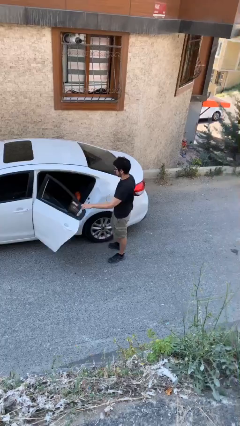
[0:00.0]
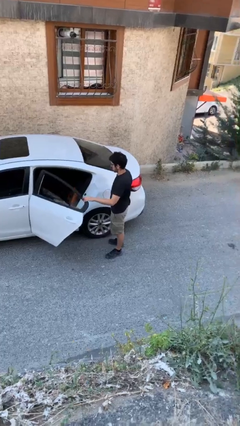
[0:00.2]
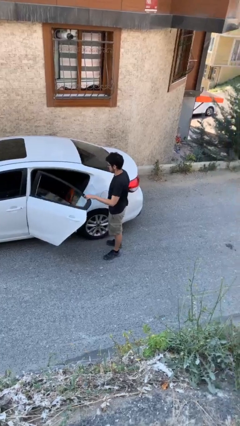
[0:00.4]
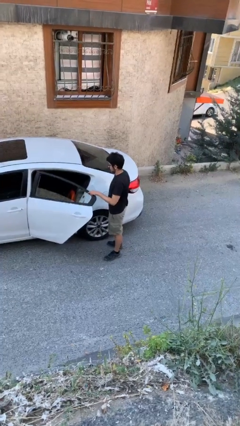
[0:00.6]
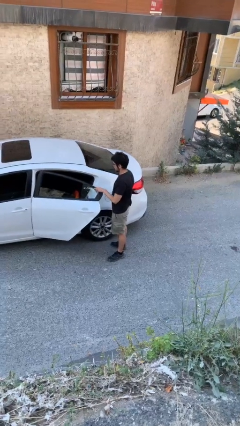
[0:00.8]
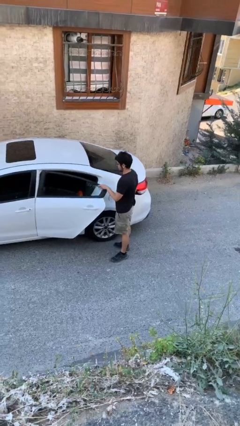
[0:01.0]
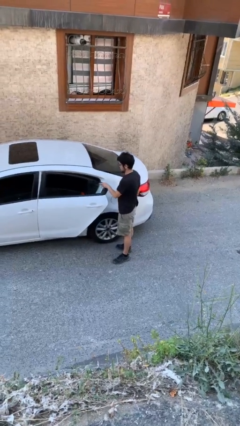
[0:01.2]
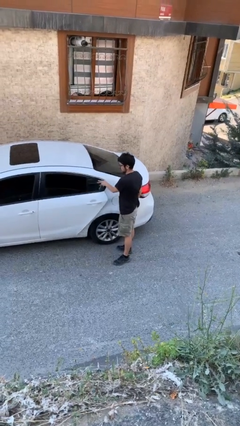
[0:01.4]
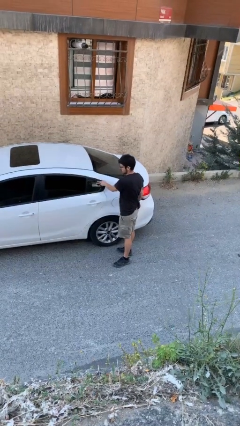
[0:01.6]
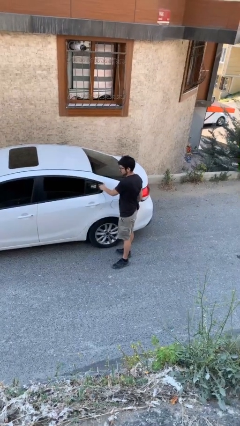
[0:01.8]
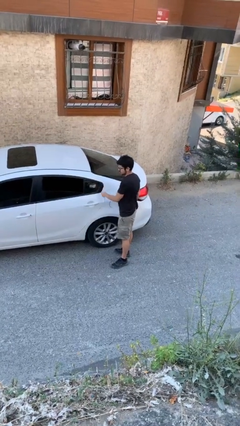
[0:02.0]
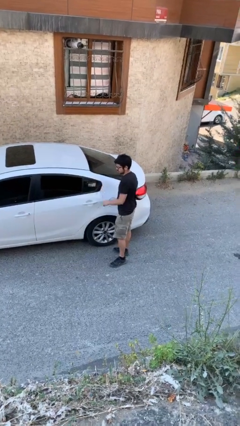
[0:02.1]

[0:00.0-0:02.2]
person closes car door

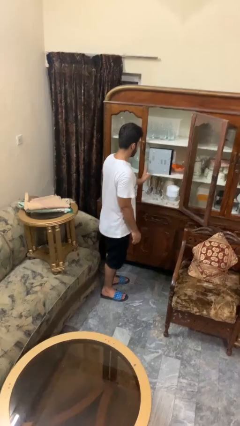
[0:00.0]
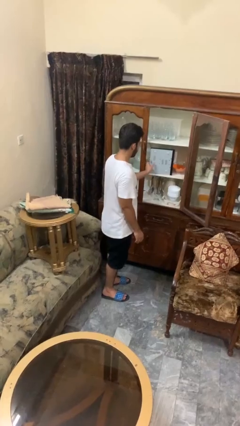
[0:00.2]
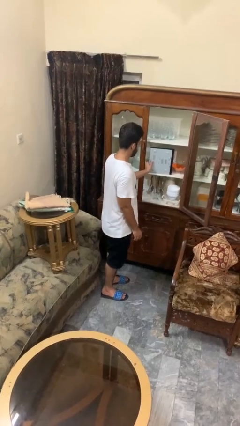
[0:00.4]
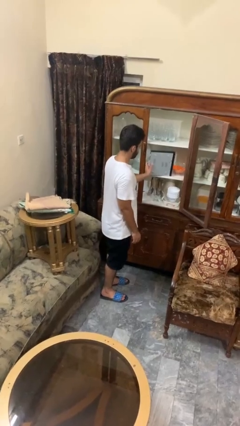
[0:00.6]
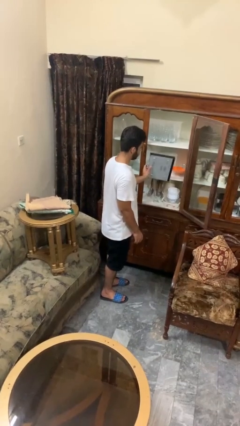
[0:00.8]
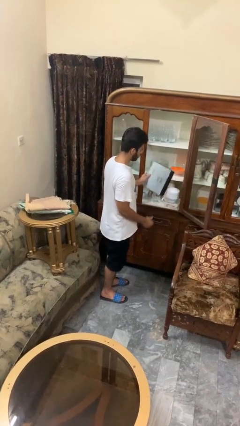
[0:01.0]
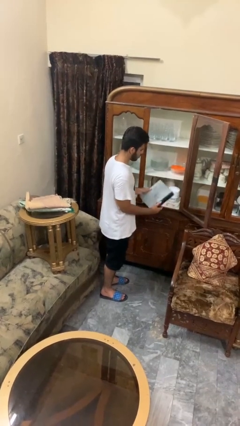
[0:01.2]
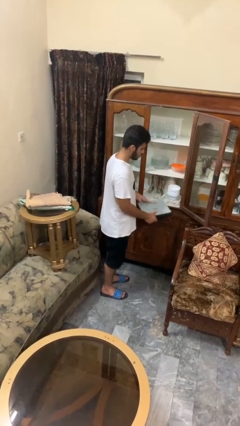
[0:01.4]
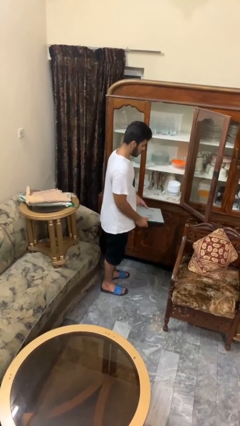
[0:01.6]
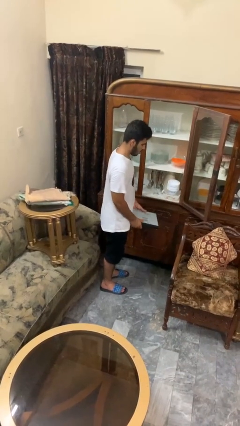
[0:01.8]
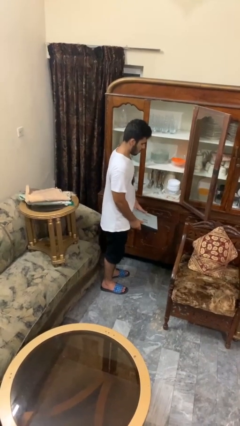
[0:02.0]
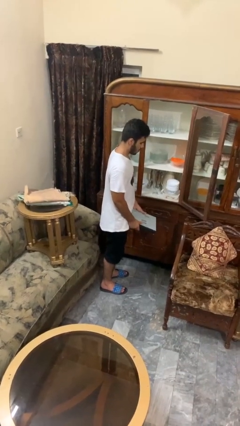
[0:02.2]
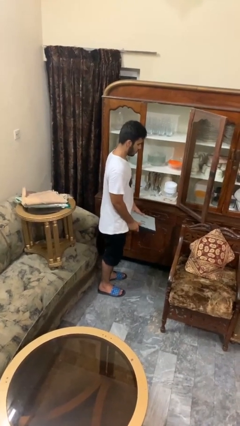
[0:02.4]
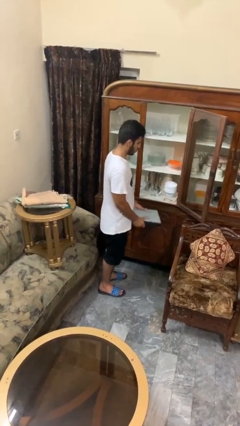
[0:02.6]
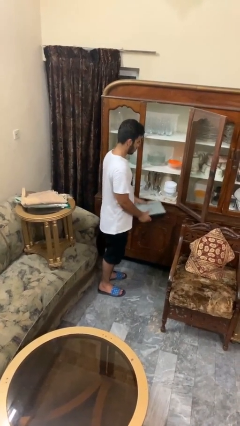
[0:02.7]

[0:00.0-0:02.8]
person picks up object from cabinet

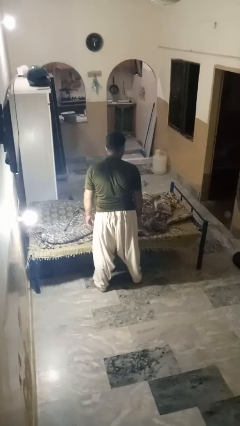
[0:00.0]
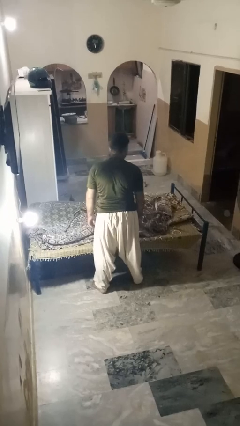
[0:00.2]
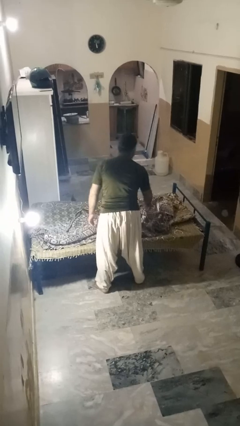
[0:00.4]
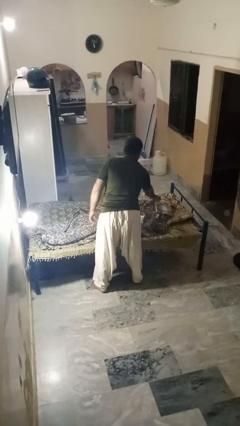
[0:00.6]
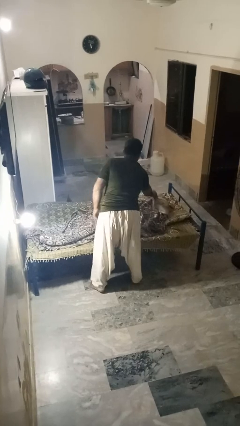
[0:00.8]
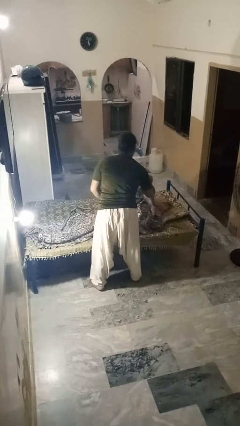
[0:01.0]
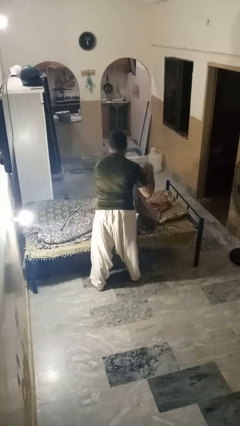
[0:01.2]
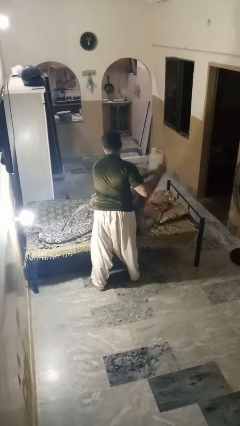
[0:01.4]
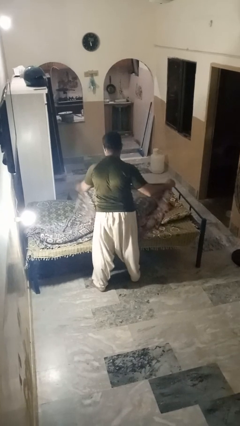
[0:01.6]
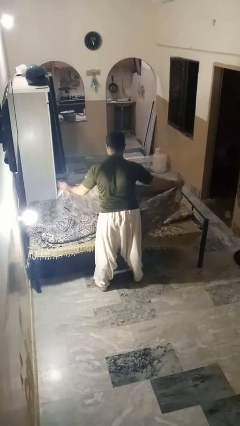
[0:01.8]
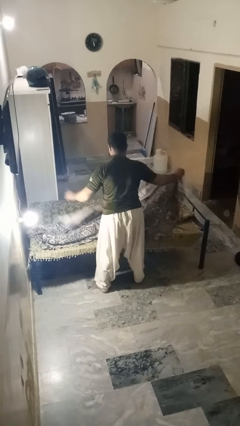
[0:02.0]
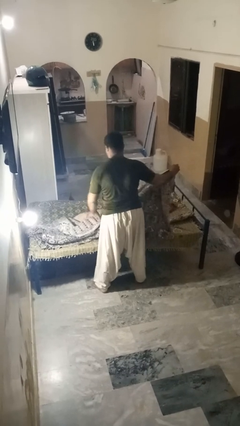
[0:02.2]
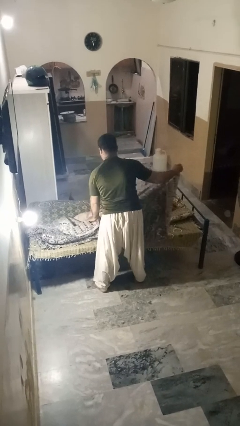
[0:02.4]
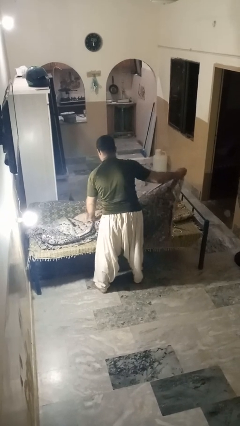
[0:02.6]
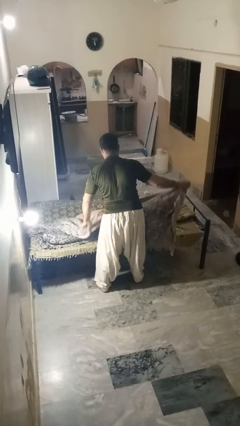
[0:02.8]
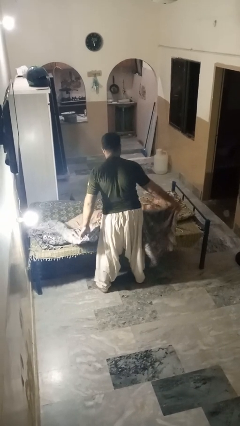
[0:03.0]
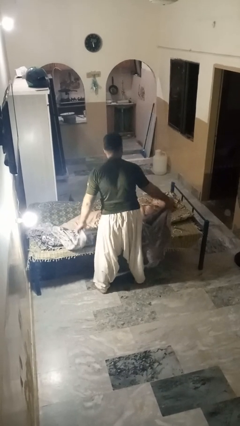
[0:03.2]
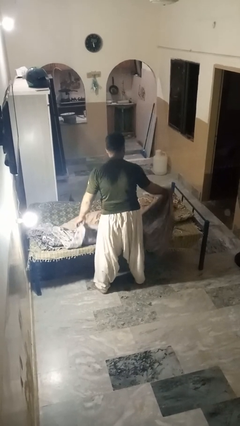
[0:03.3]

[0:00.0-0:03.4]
person uncovers friend with blanket

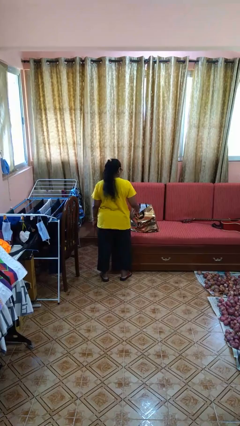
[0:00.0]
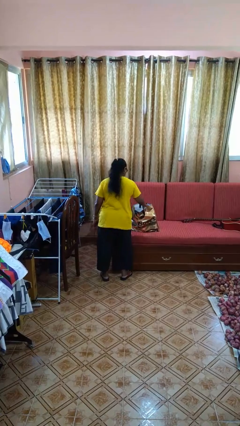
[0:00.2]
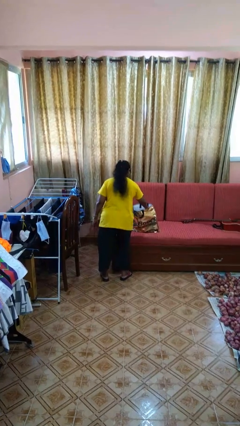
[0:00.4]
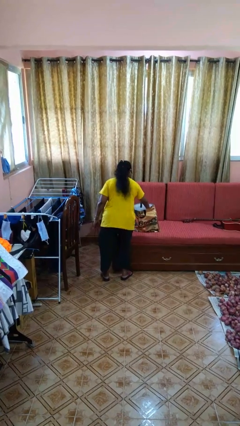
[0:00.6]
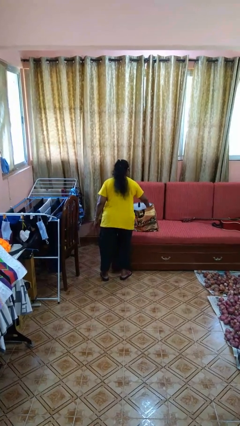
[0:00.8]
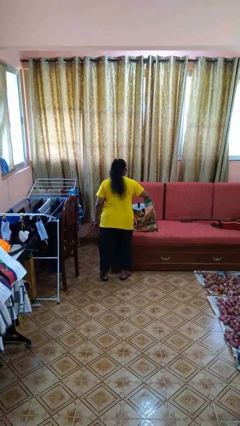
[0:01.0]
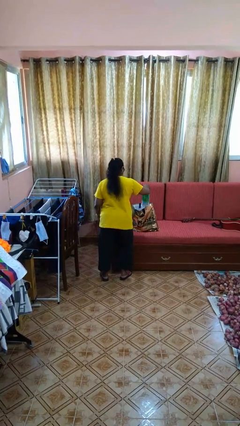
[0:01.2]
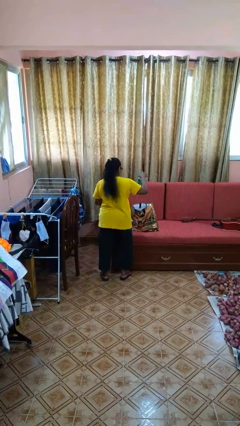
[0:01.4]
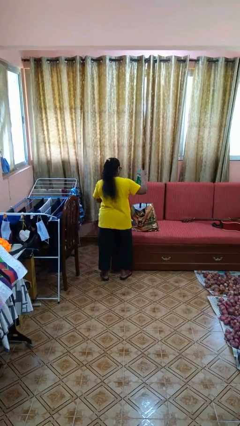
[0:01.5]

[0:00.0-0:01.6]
person takes object from bag

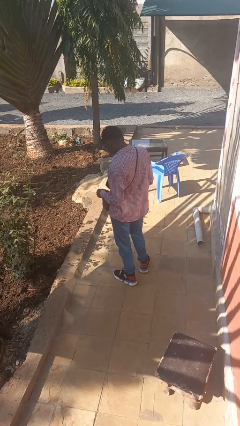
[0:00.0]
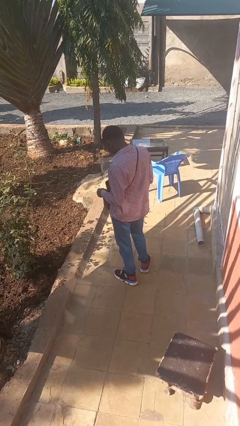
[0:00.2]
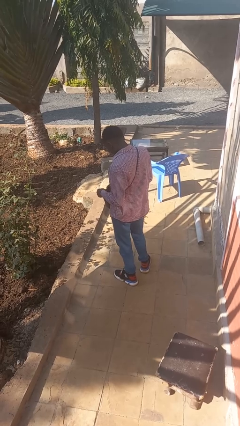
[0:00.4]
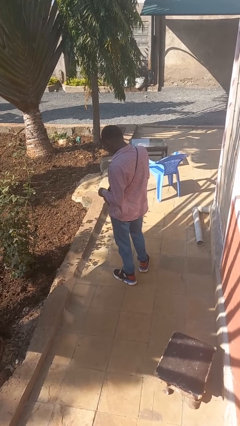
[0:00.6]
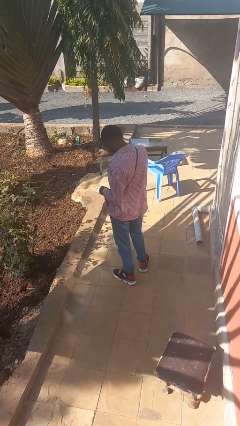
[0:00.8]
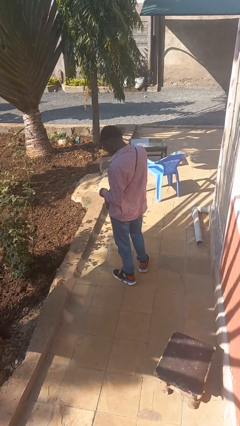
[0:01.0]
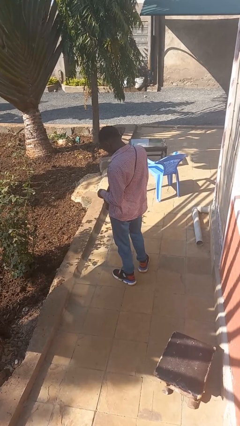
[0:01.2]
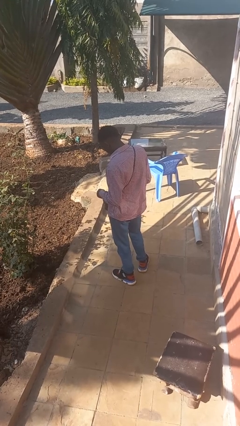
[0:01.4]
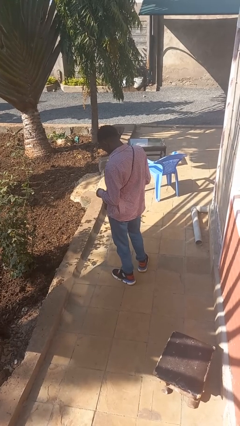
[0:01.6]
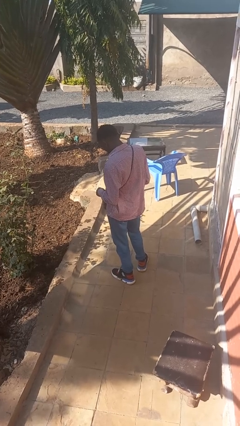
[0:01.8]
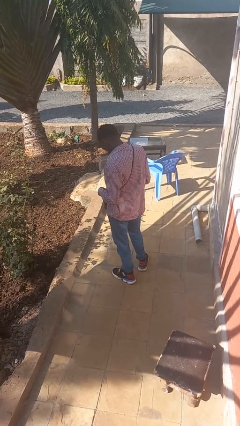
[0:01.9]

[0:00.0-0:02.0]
person puts object into purse

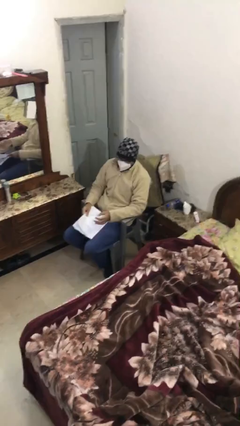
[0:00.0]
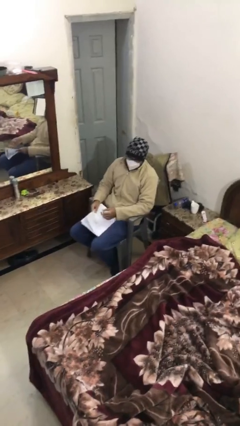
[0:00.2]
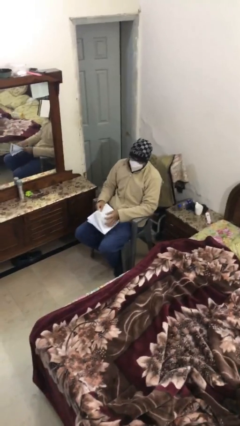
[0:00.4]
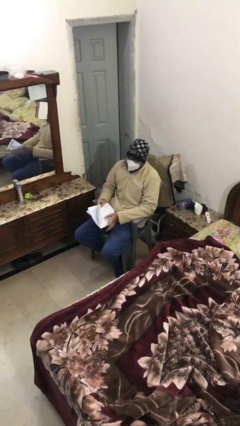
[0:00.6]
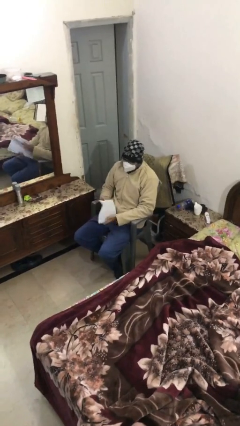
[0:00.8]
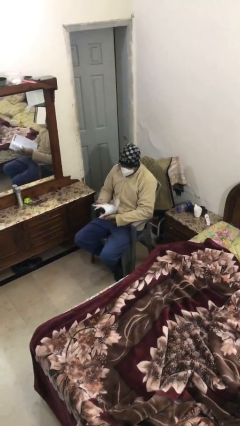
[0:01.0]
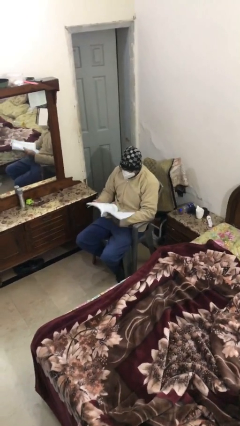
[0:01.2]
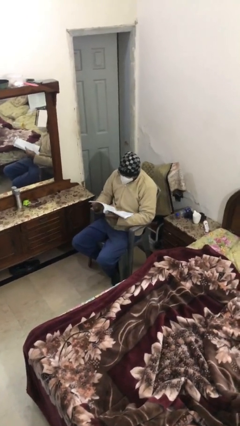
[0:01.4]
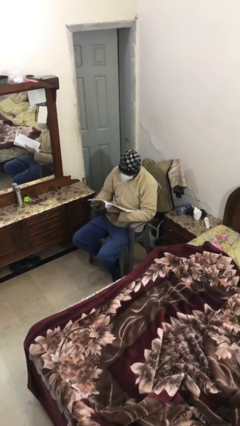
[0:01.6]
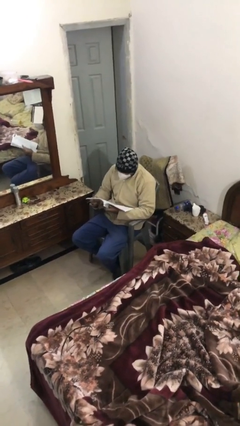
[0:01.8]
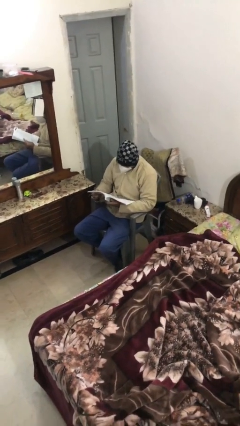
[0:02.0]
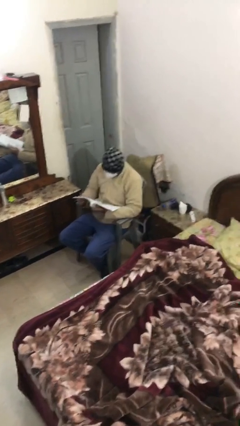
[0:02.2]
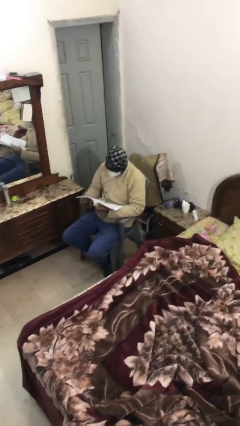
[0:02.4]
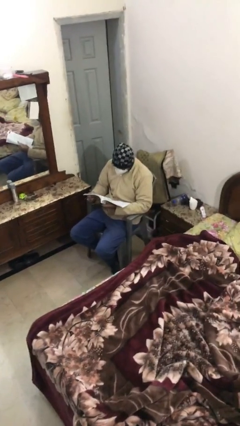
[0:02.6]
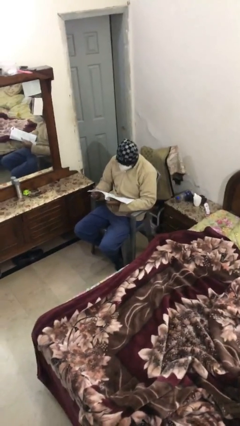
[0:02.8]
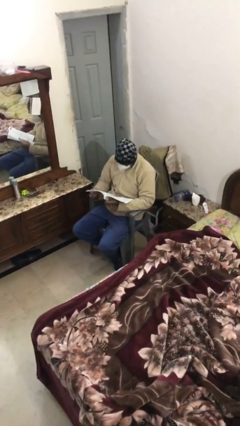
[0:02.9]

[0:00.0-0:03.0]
person reads document

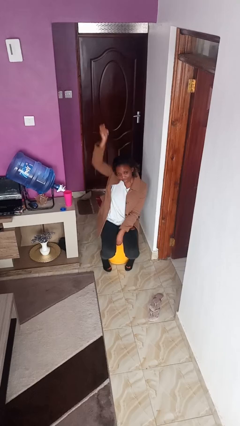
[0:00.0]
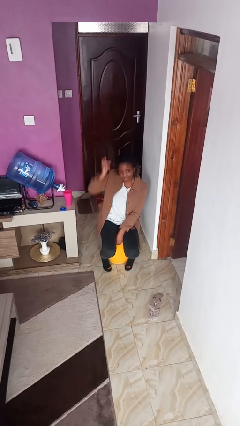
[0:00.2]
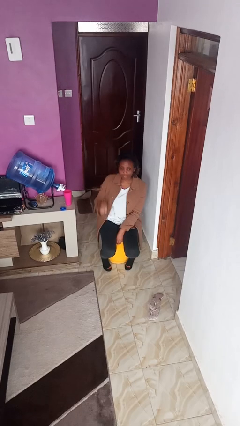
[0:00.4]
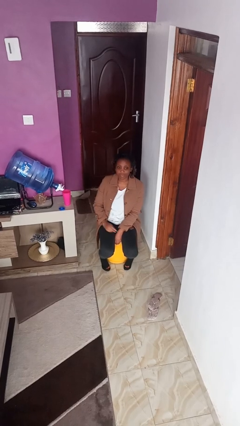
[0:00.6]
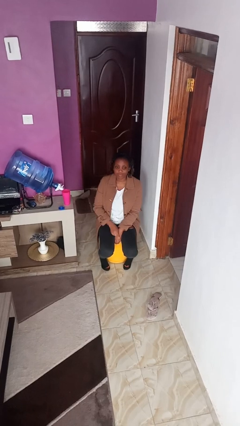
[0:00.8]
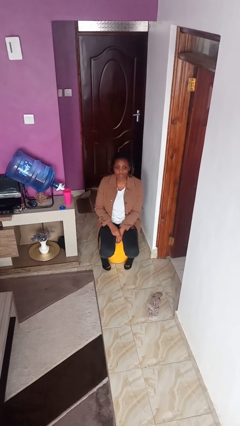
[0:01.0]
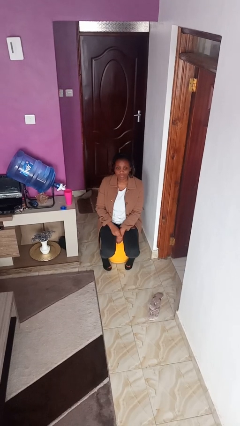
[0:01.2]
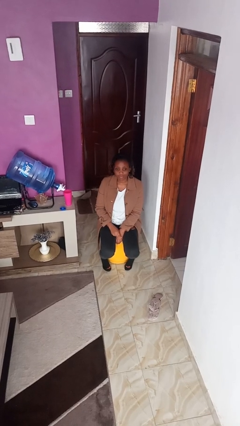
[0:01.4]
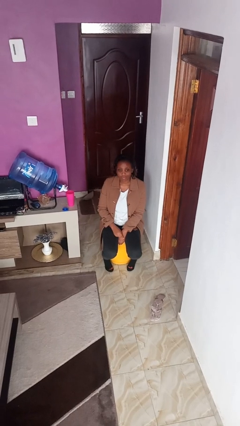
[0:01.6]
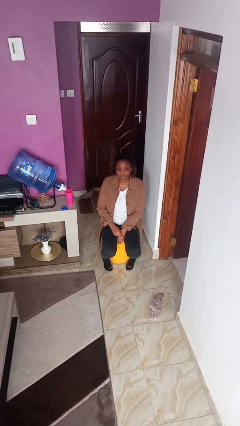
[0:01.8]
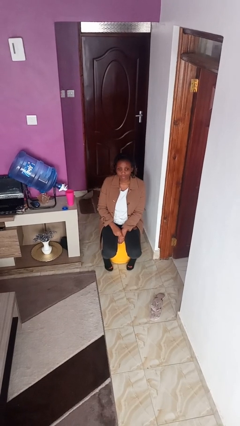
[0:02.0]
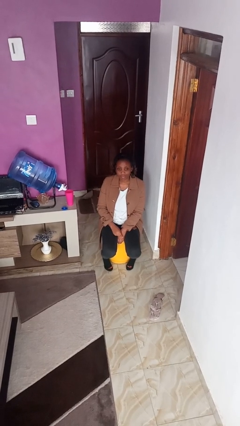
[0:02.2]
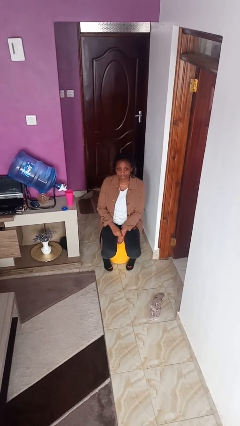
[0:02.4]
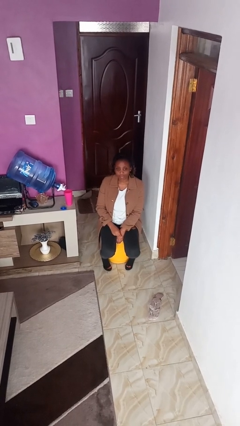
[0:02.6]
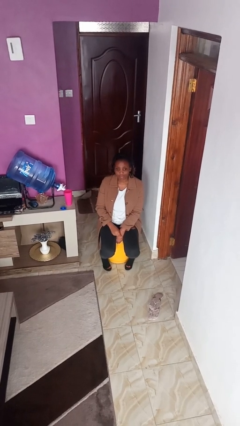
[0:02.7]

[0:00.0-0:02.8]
person gestures lower hand
